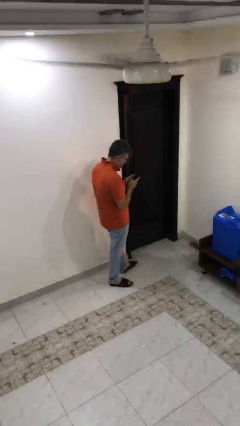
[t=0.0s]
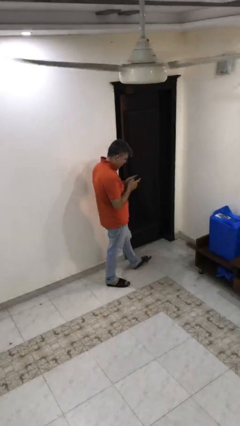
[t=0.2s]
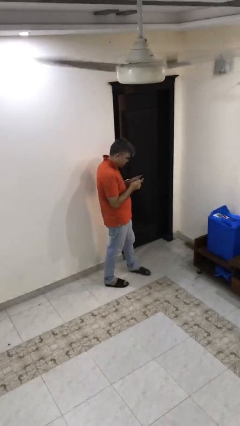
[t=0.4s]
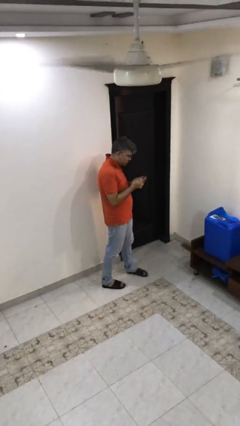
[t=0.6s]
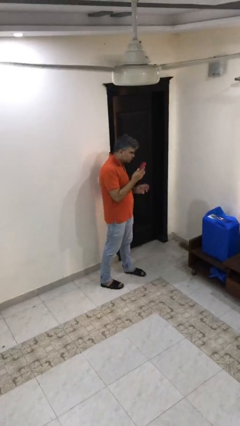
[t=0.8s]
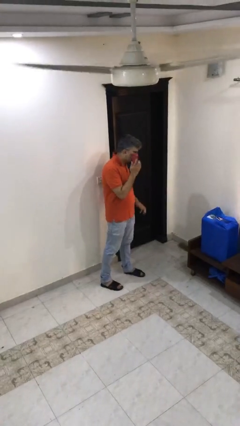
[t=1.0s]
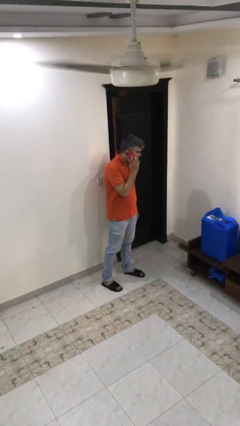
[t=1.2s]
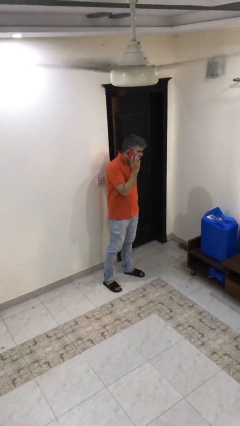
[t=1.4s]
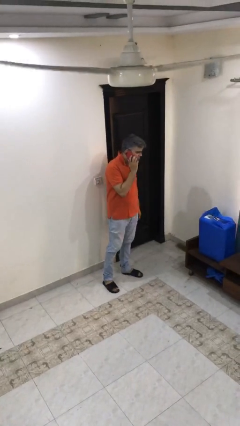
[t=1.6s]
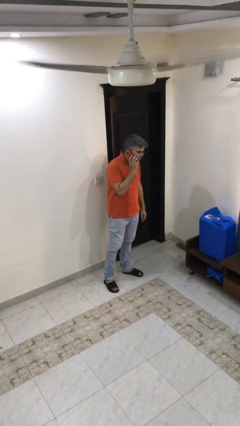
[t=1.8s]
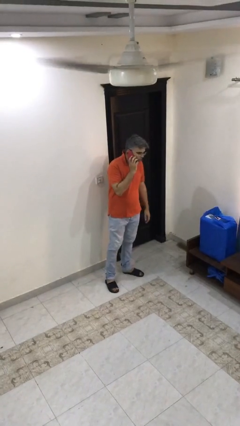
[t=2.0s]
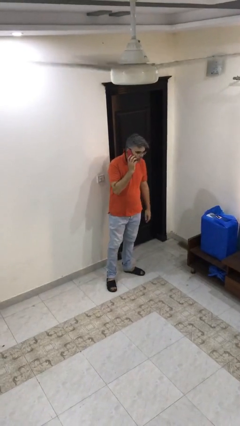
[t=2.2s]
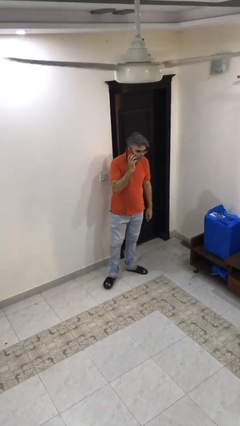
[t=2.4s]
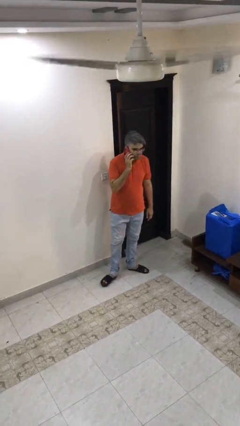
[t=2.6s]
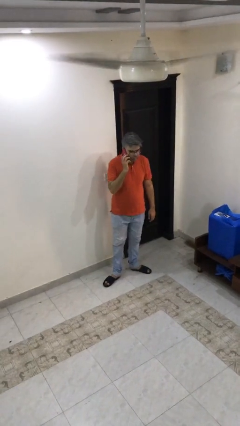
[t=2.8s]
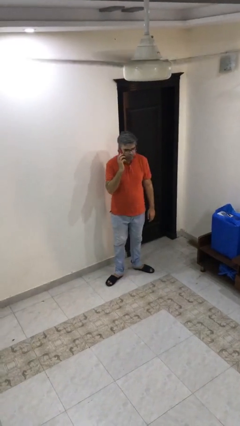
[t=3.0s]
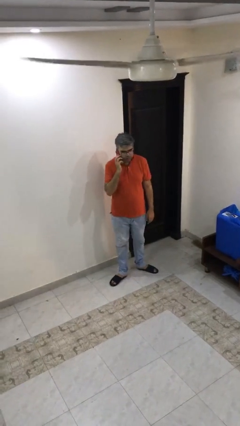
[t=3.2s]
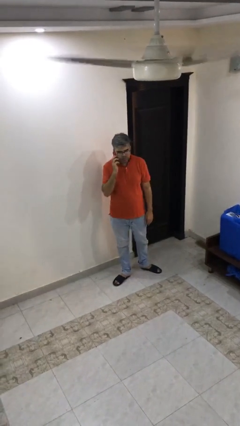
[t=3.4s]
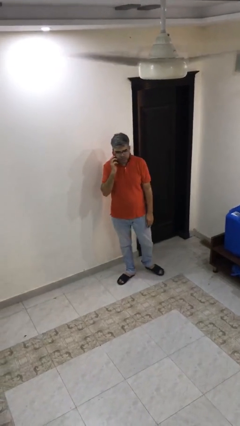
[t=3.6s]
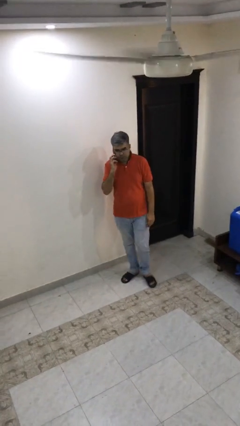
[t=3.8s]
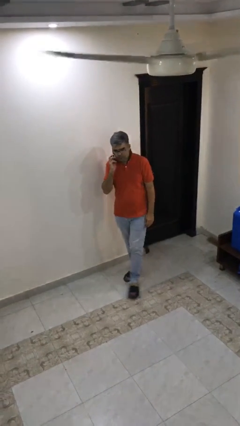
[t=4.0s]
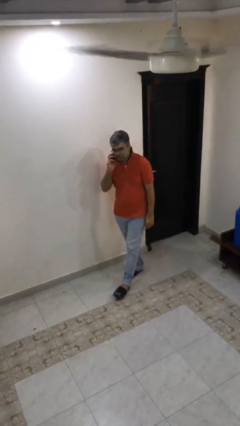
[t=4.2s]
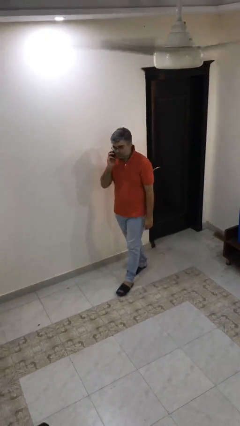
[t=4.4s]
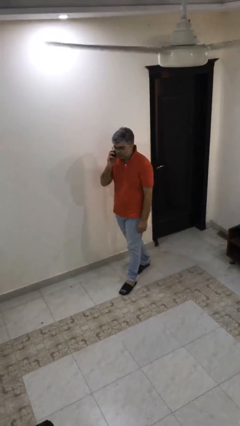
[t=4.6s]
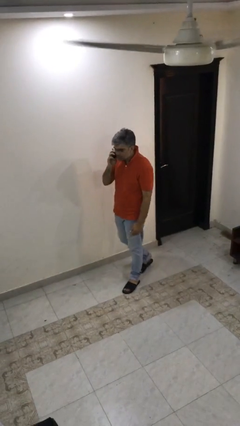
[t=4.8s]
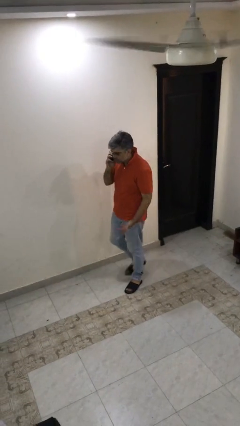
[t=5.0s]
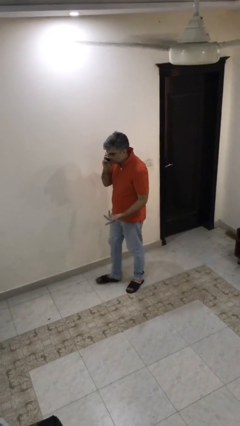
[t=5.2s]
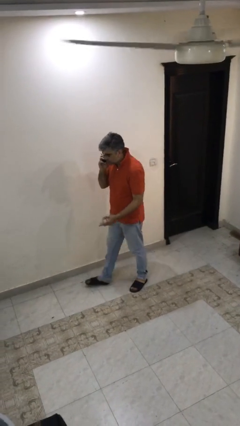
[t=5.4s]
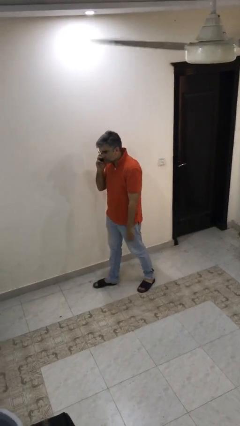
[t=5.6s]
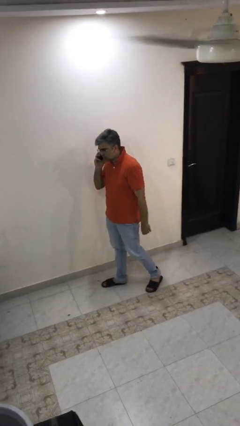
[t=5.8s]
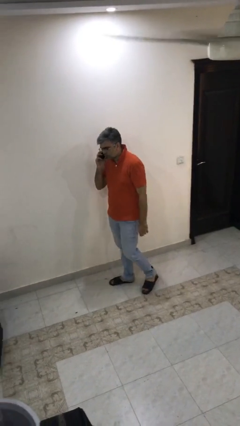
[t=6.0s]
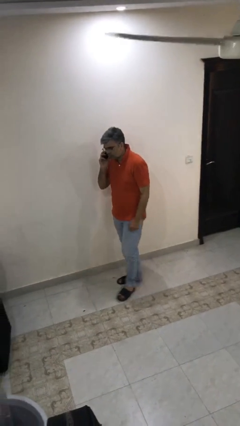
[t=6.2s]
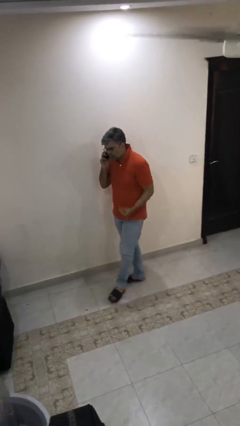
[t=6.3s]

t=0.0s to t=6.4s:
person talks on phone

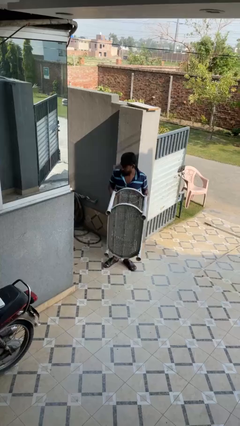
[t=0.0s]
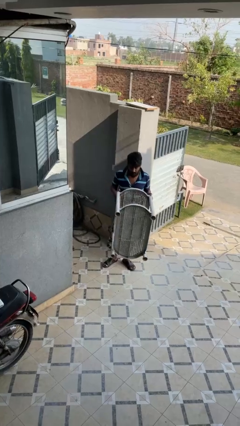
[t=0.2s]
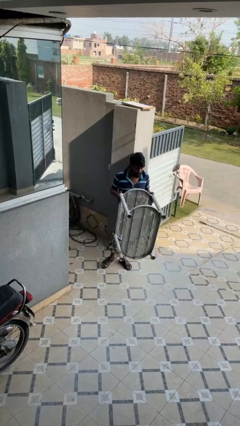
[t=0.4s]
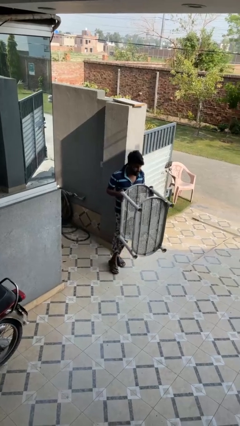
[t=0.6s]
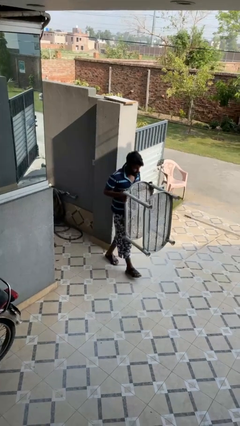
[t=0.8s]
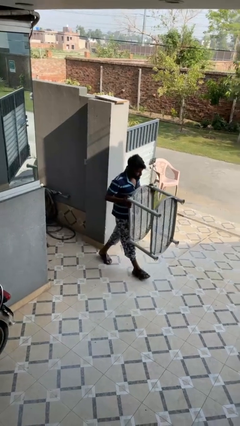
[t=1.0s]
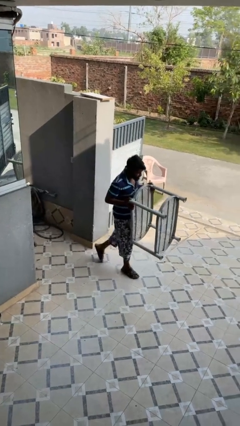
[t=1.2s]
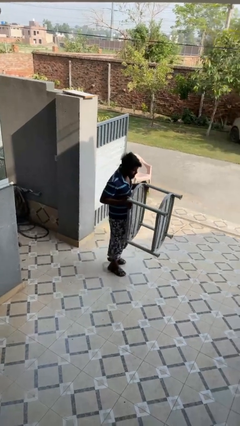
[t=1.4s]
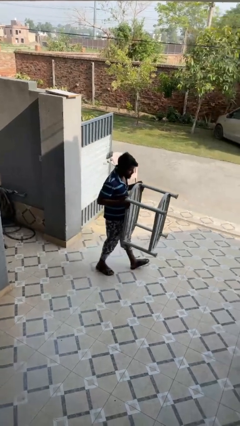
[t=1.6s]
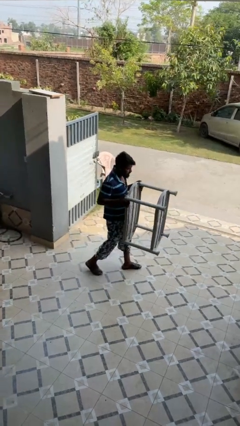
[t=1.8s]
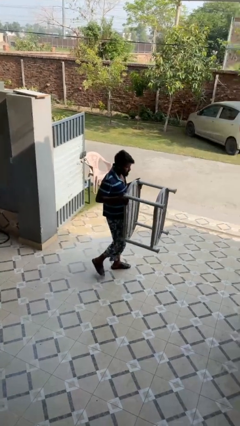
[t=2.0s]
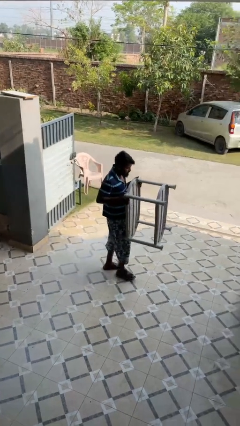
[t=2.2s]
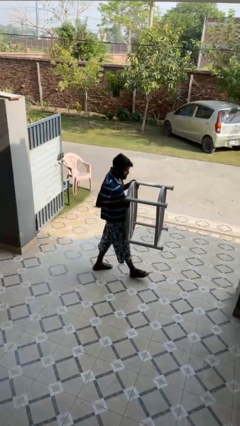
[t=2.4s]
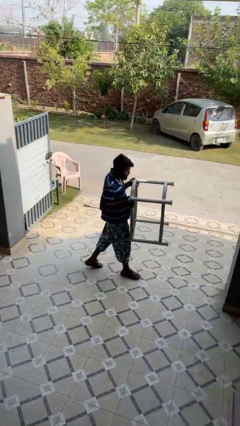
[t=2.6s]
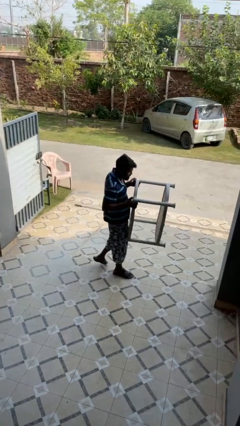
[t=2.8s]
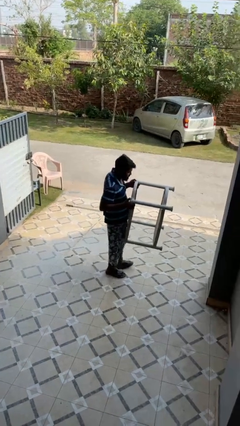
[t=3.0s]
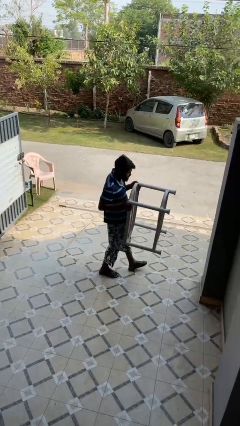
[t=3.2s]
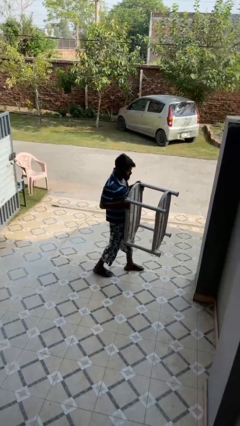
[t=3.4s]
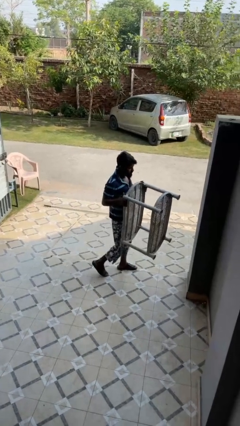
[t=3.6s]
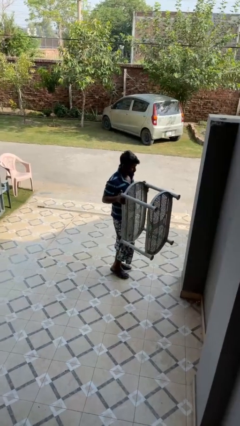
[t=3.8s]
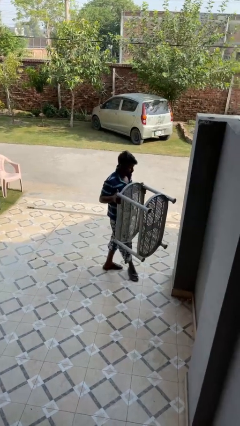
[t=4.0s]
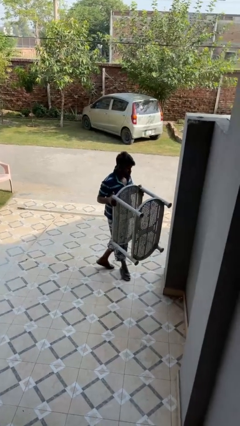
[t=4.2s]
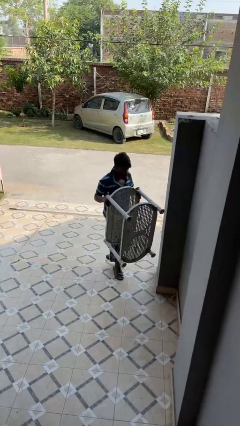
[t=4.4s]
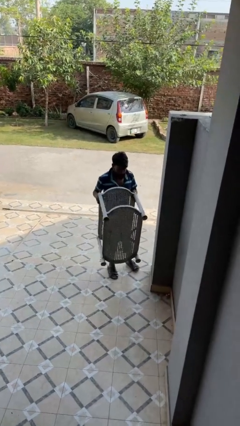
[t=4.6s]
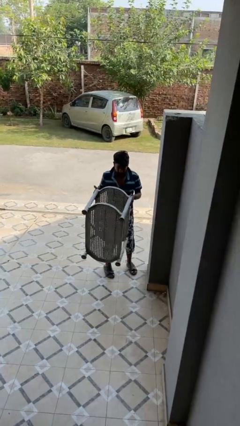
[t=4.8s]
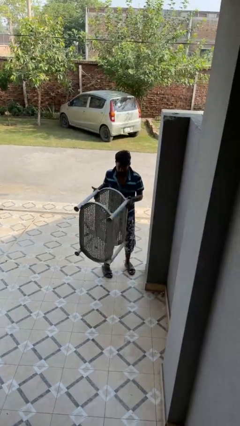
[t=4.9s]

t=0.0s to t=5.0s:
person carries furniture

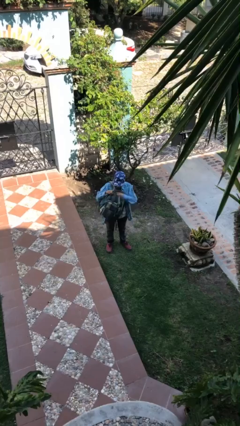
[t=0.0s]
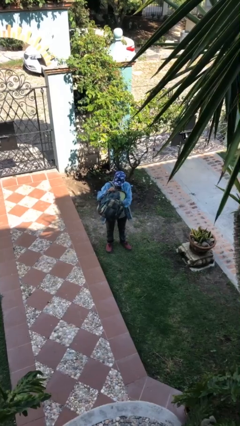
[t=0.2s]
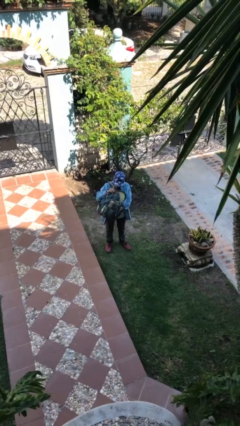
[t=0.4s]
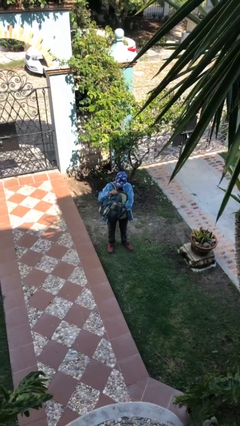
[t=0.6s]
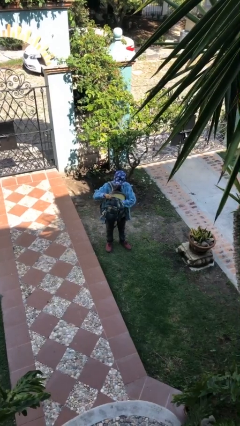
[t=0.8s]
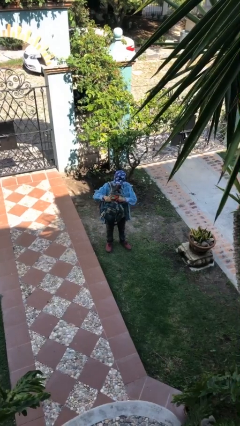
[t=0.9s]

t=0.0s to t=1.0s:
person searches in backpack

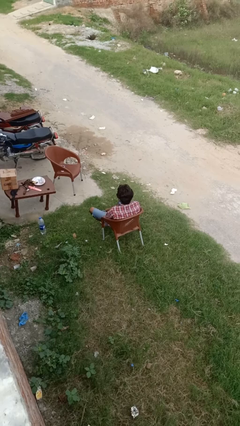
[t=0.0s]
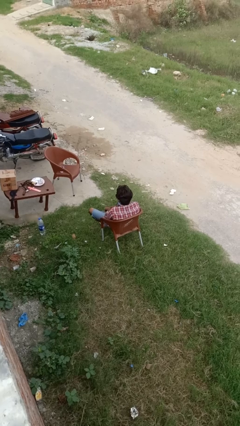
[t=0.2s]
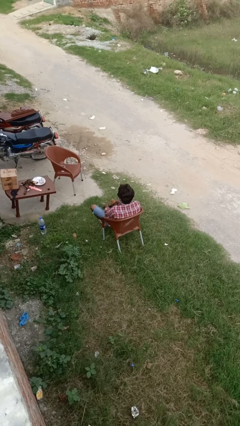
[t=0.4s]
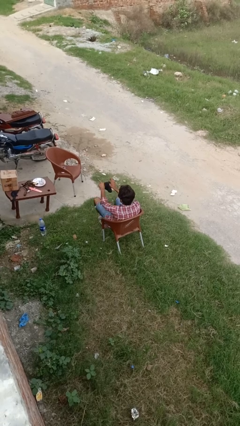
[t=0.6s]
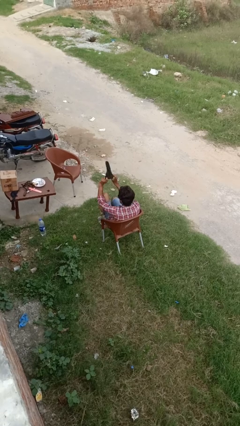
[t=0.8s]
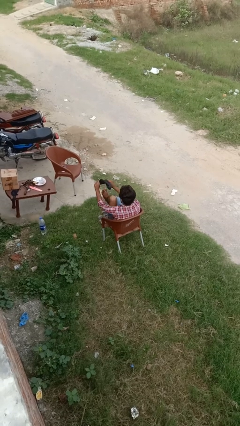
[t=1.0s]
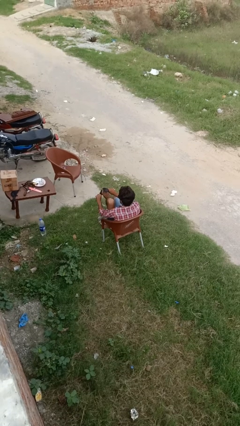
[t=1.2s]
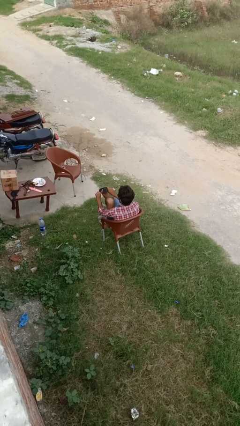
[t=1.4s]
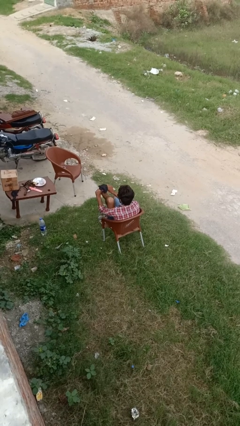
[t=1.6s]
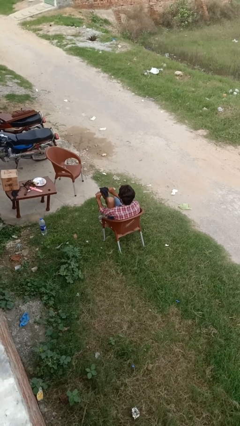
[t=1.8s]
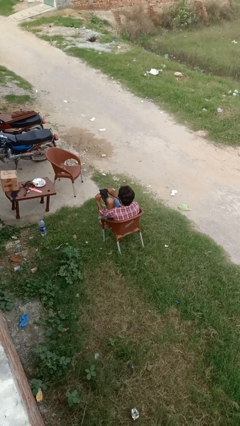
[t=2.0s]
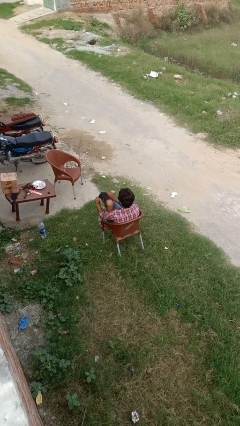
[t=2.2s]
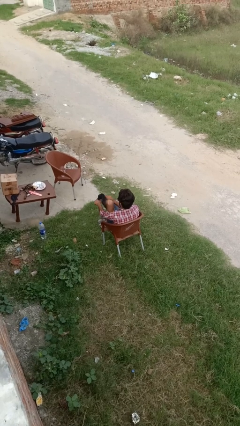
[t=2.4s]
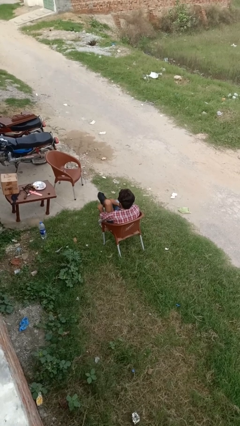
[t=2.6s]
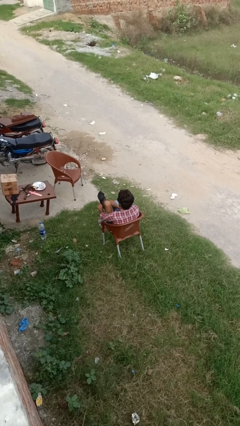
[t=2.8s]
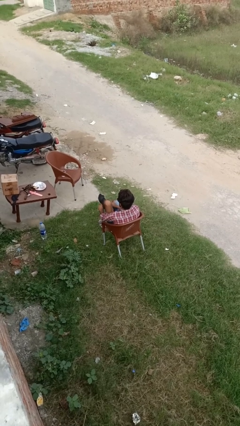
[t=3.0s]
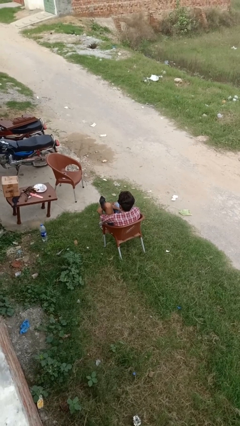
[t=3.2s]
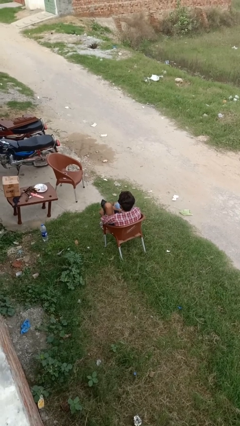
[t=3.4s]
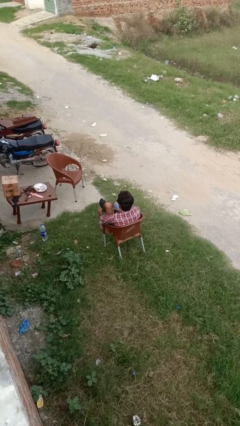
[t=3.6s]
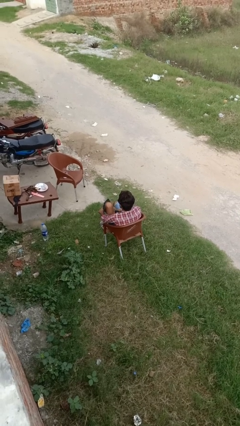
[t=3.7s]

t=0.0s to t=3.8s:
person puts on socks

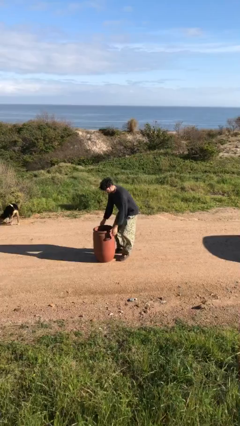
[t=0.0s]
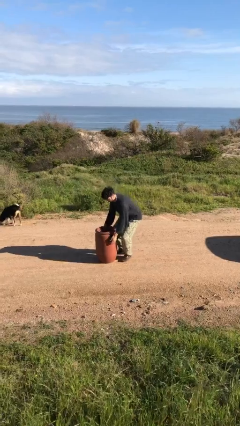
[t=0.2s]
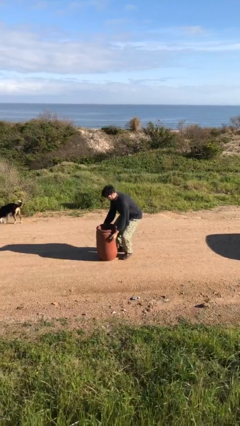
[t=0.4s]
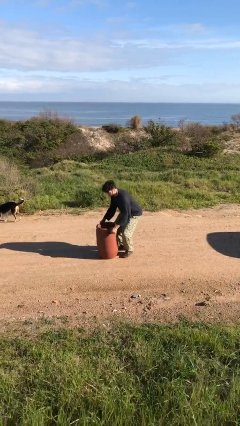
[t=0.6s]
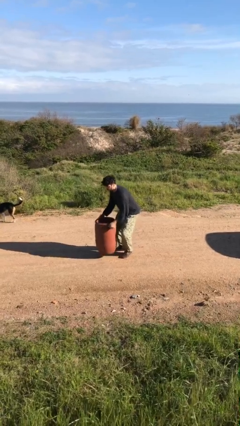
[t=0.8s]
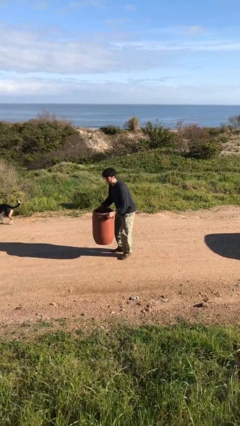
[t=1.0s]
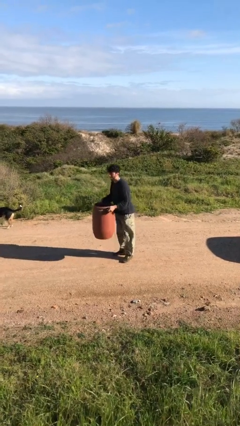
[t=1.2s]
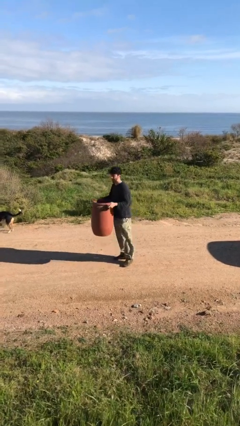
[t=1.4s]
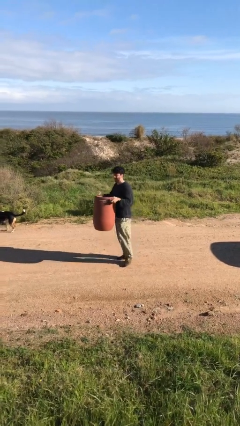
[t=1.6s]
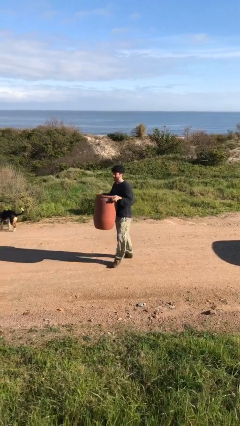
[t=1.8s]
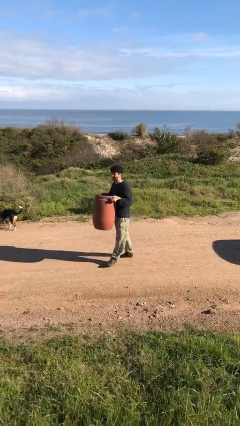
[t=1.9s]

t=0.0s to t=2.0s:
person picks up object from floor
